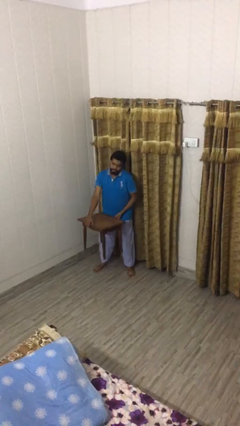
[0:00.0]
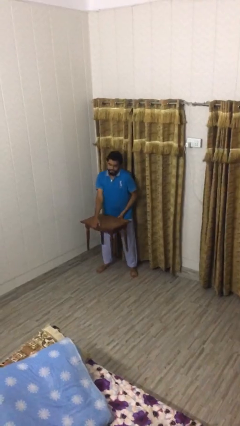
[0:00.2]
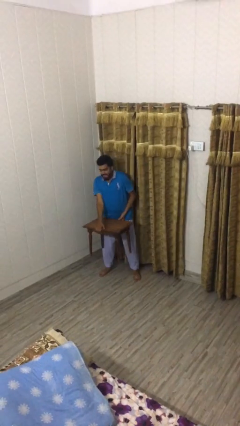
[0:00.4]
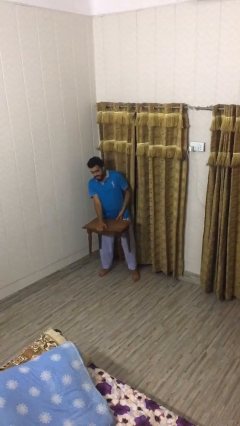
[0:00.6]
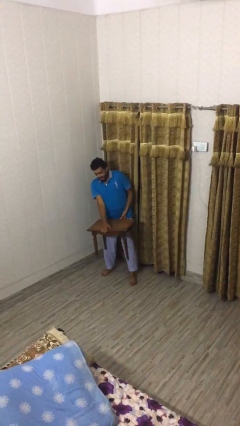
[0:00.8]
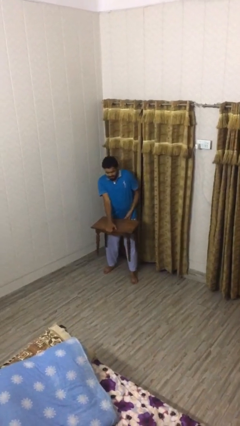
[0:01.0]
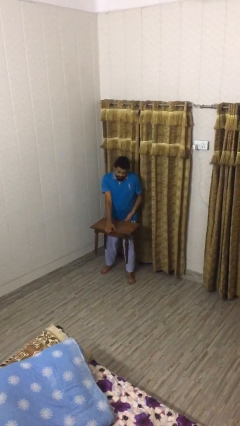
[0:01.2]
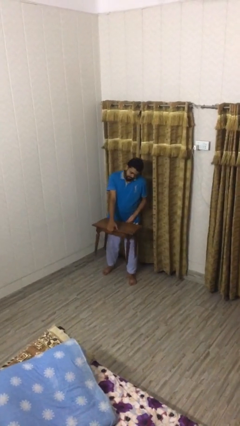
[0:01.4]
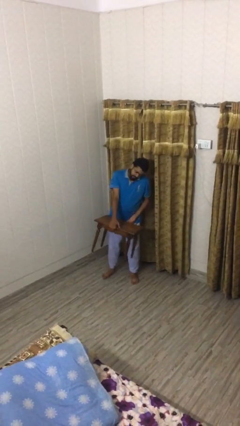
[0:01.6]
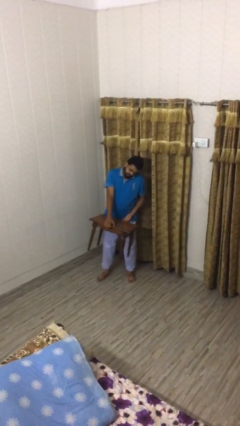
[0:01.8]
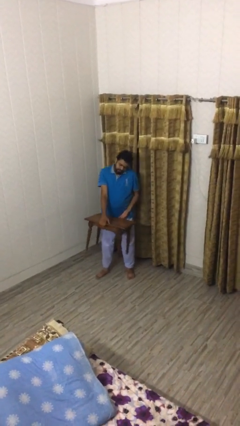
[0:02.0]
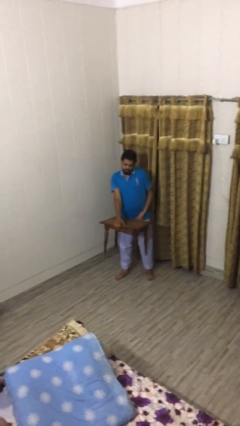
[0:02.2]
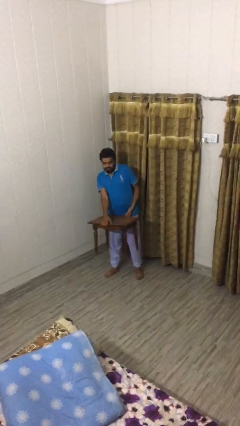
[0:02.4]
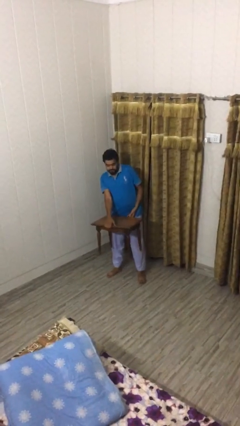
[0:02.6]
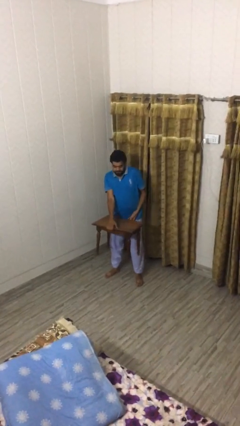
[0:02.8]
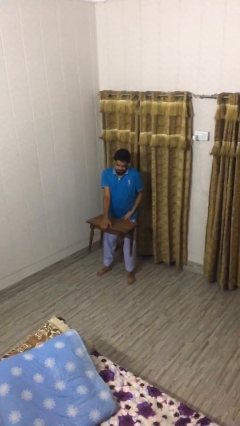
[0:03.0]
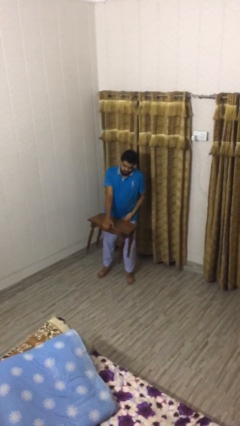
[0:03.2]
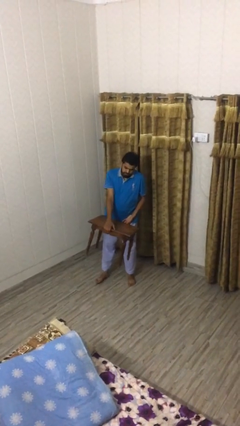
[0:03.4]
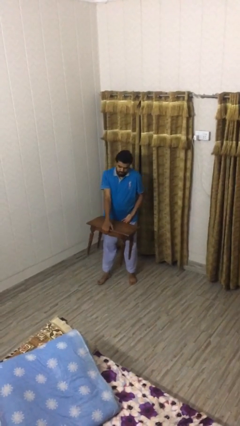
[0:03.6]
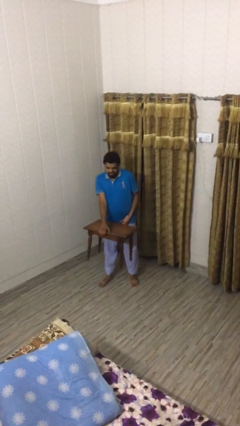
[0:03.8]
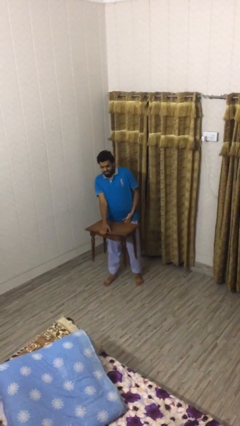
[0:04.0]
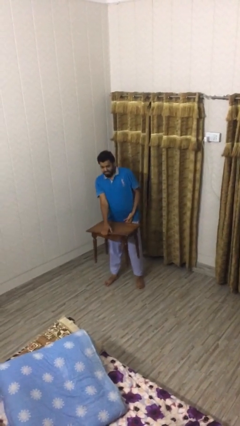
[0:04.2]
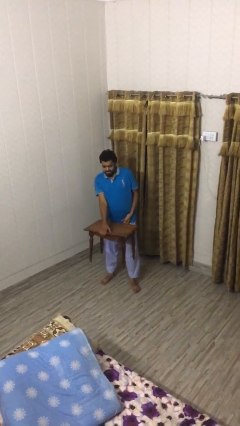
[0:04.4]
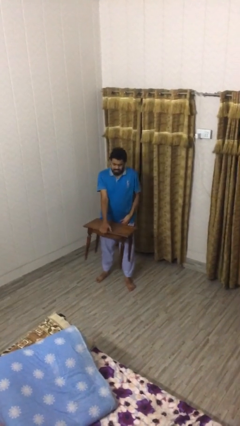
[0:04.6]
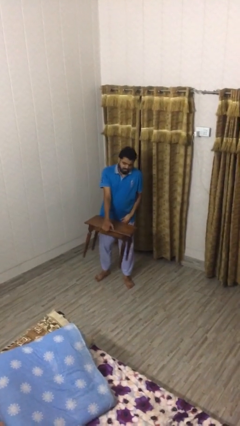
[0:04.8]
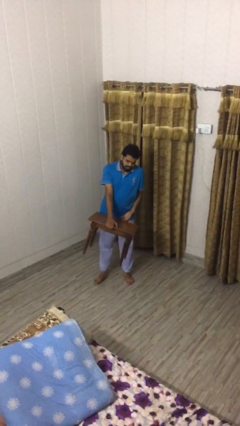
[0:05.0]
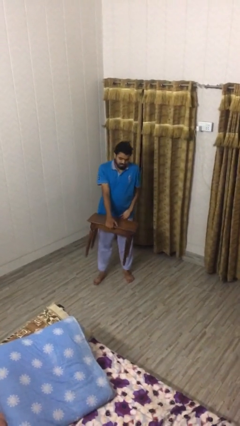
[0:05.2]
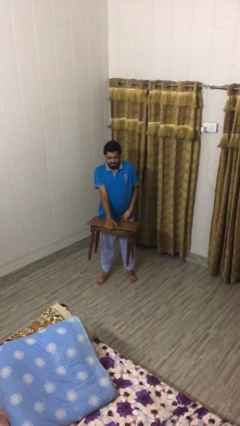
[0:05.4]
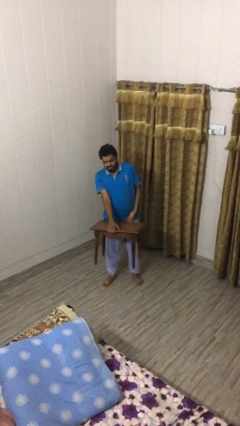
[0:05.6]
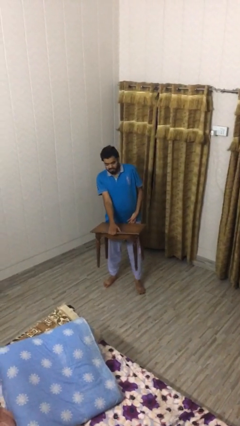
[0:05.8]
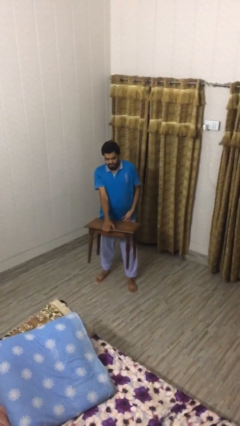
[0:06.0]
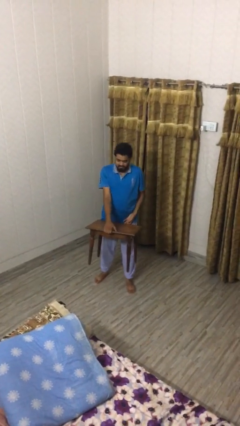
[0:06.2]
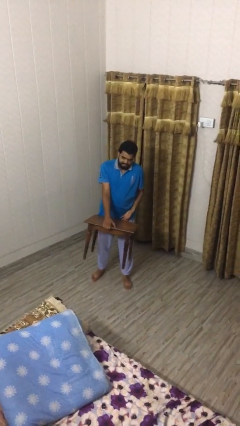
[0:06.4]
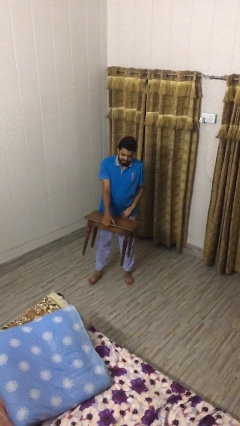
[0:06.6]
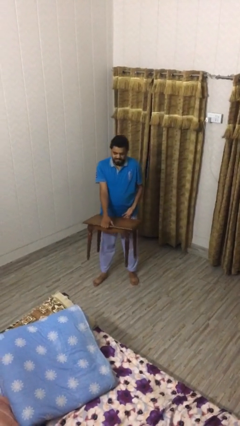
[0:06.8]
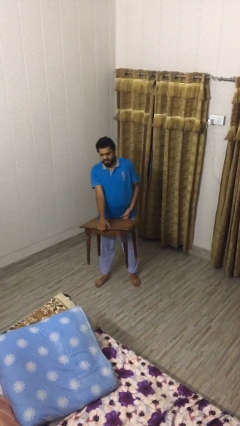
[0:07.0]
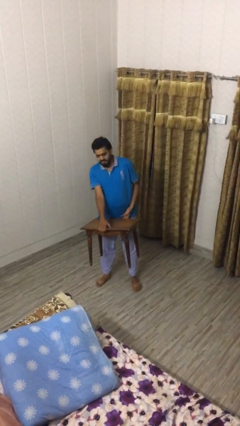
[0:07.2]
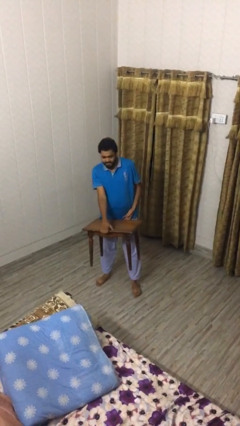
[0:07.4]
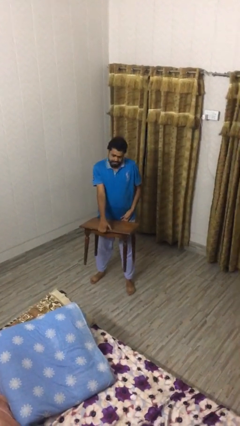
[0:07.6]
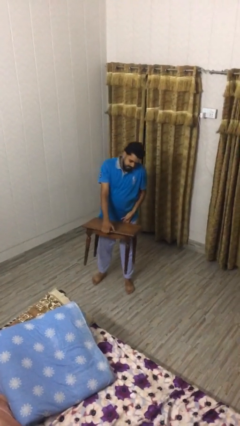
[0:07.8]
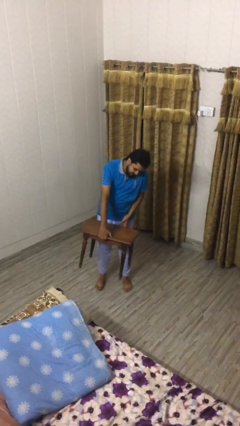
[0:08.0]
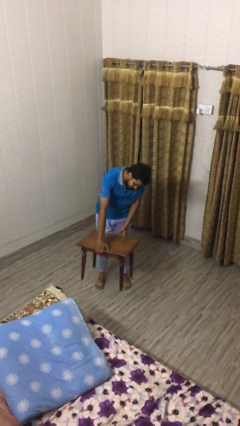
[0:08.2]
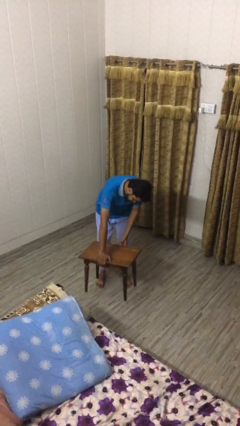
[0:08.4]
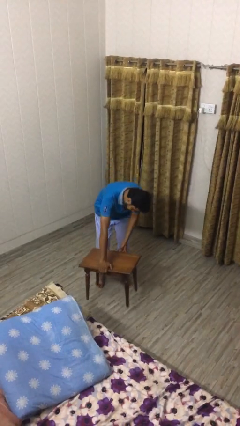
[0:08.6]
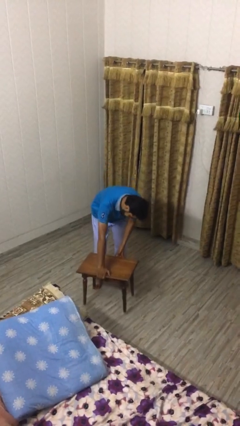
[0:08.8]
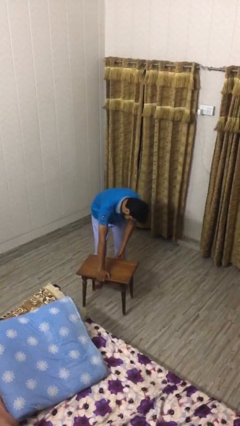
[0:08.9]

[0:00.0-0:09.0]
person carries heavy object

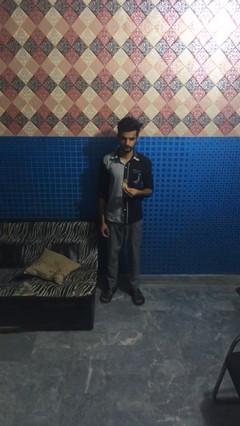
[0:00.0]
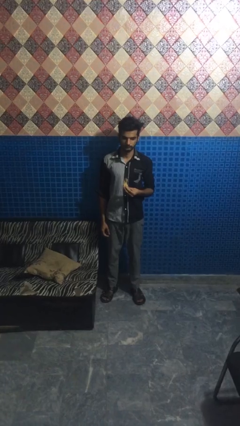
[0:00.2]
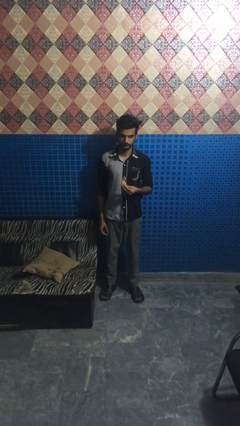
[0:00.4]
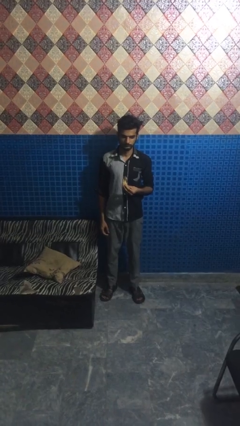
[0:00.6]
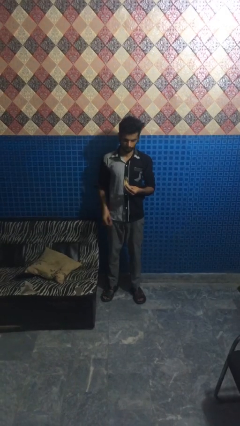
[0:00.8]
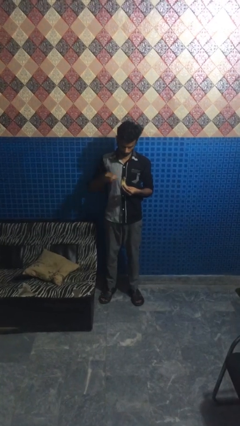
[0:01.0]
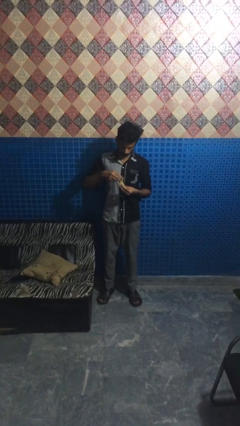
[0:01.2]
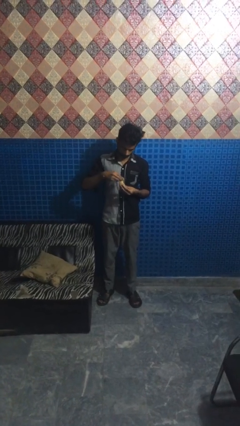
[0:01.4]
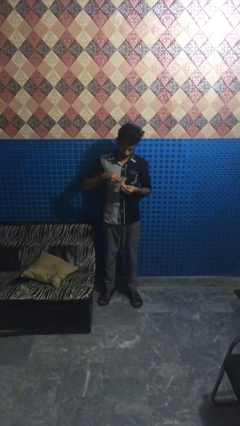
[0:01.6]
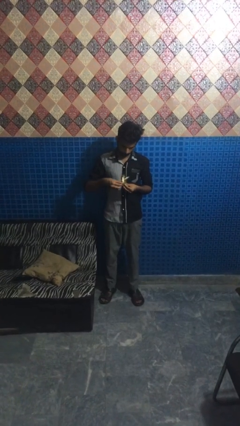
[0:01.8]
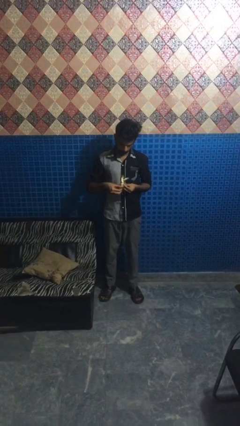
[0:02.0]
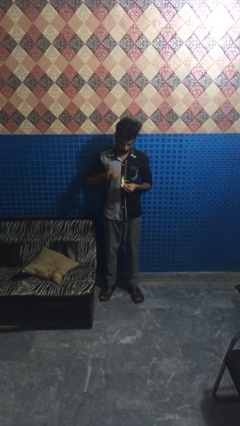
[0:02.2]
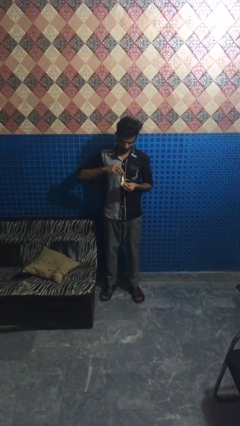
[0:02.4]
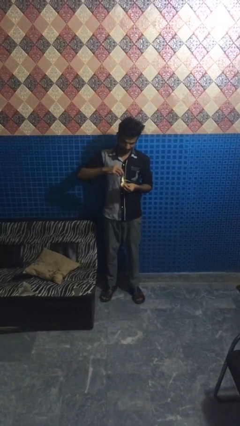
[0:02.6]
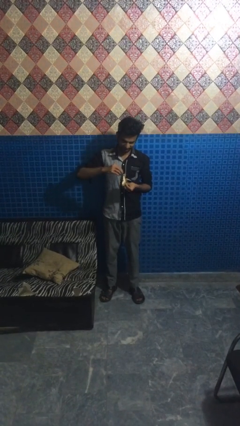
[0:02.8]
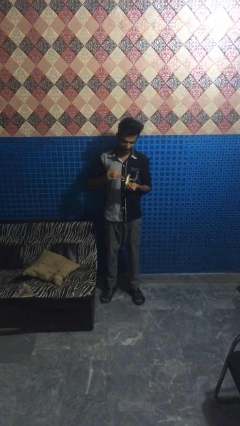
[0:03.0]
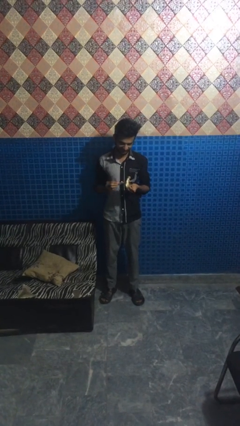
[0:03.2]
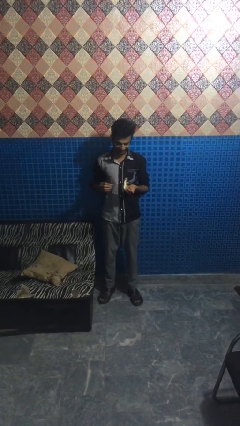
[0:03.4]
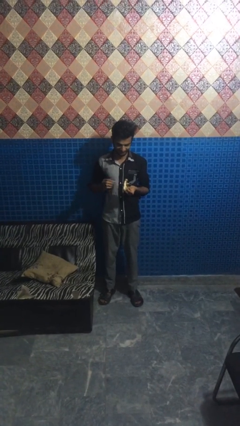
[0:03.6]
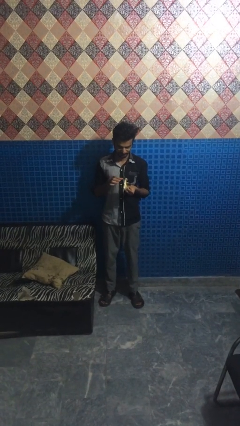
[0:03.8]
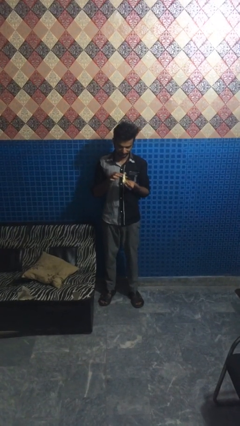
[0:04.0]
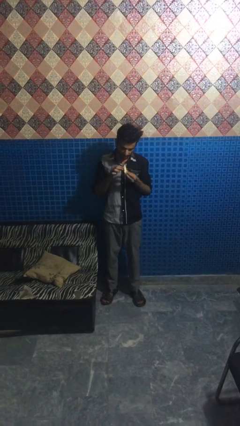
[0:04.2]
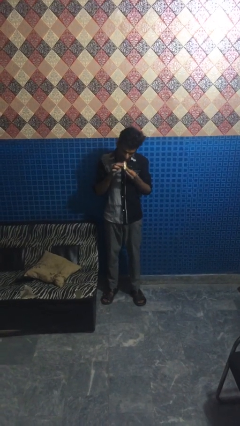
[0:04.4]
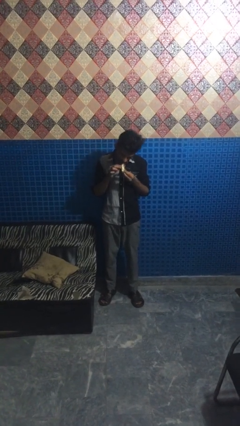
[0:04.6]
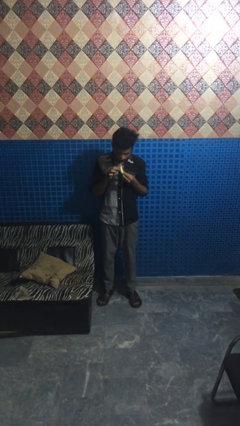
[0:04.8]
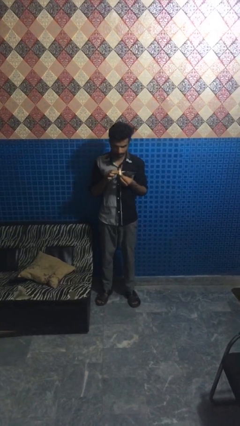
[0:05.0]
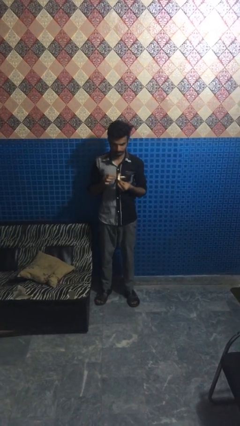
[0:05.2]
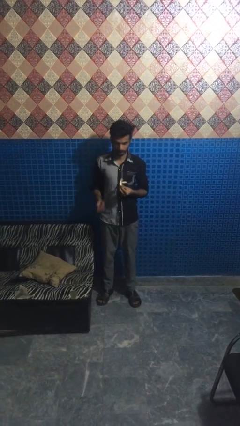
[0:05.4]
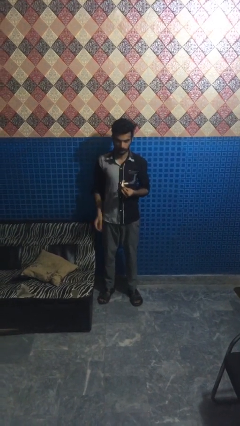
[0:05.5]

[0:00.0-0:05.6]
person eats banana

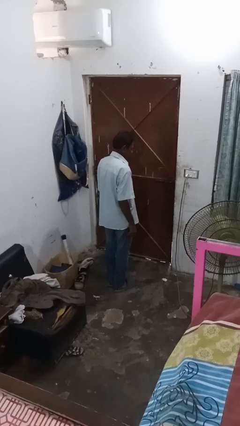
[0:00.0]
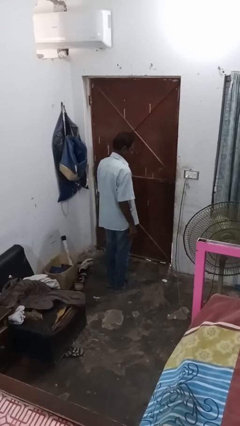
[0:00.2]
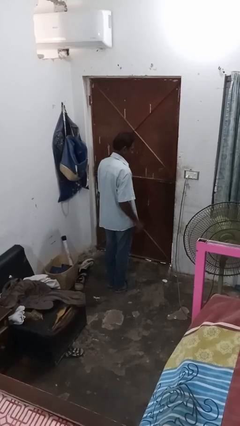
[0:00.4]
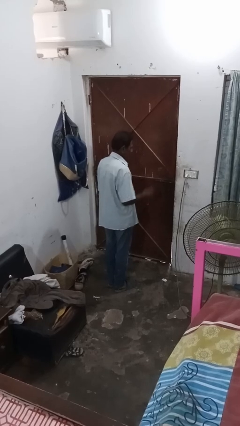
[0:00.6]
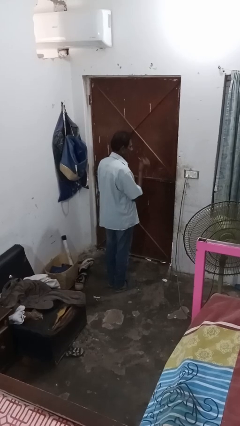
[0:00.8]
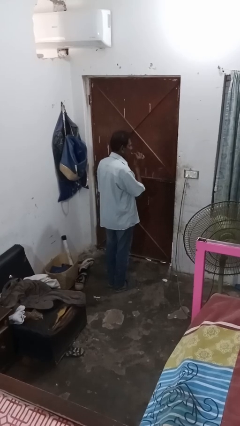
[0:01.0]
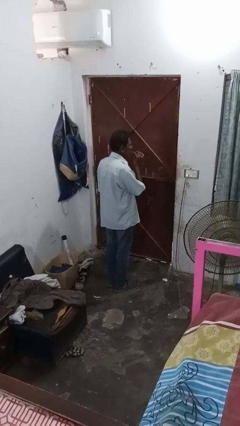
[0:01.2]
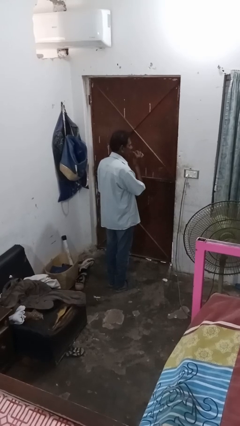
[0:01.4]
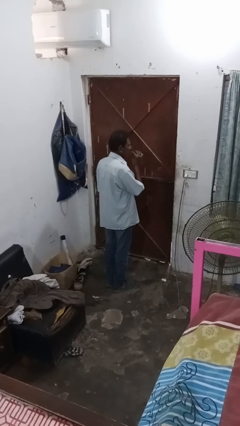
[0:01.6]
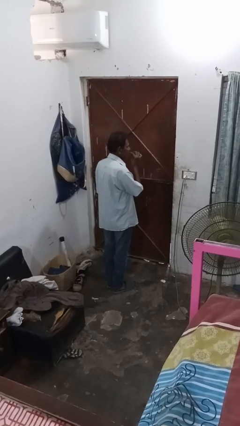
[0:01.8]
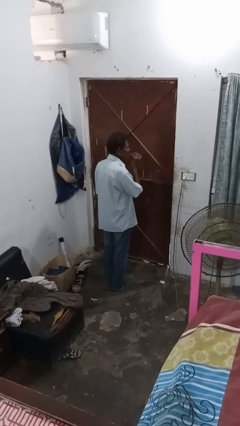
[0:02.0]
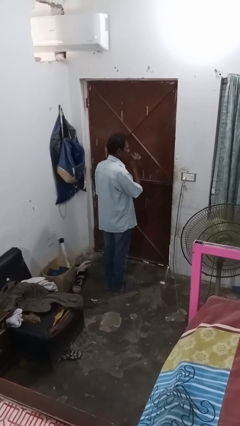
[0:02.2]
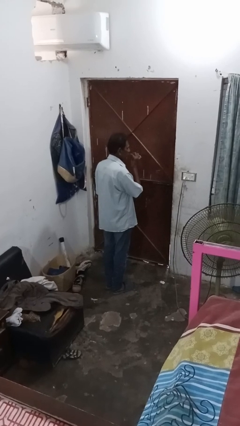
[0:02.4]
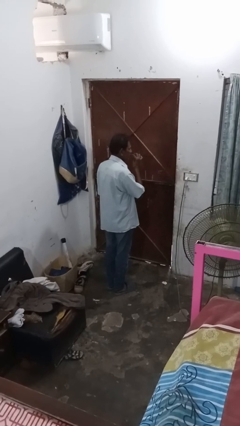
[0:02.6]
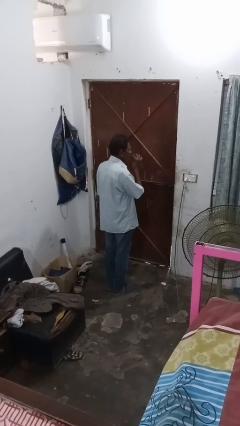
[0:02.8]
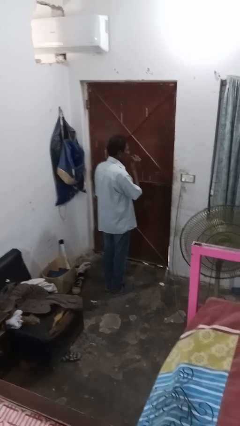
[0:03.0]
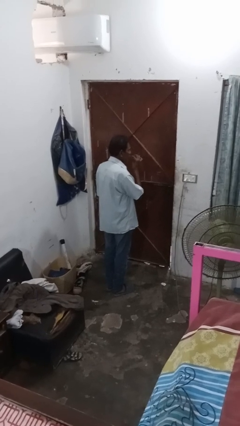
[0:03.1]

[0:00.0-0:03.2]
person flosses
